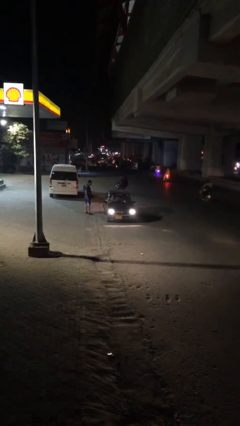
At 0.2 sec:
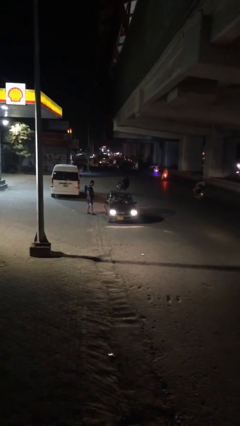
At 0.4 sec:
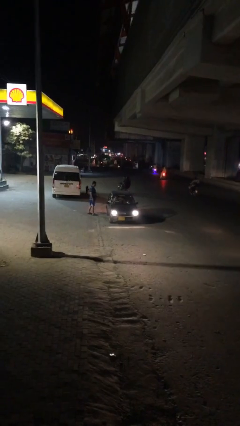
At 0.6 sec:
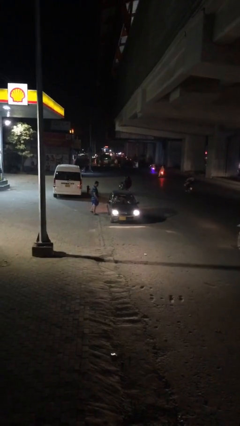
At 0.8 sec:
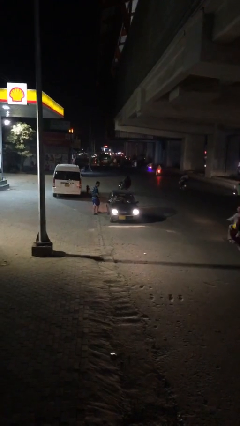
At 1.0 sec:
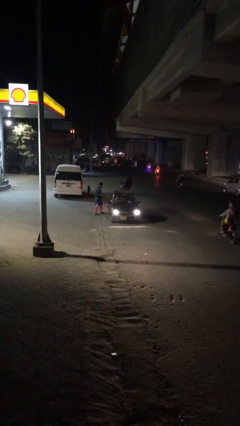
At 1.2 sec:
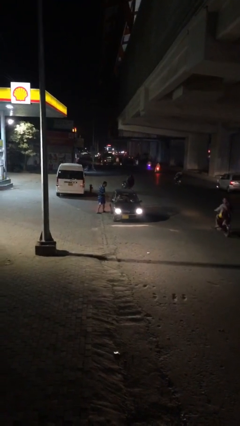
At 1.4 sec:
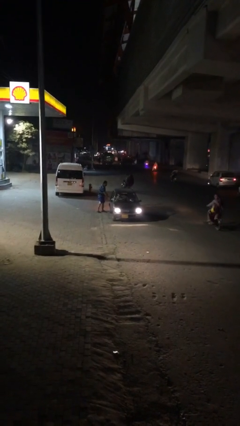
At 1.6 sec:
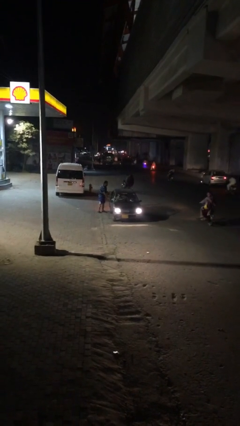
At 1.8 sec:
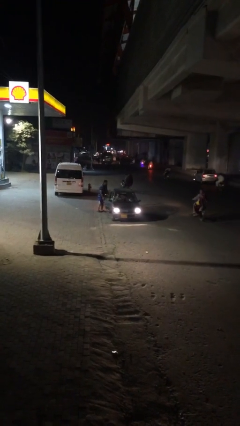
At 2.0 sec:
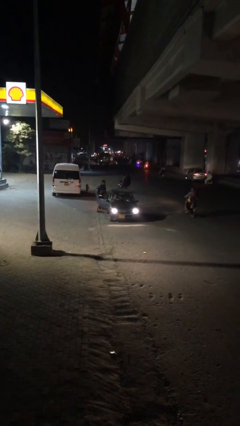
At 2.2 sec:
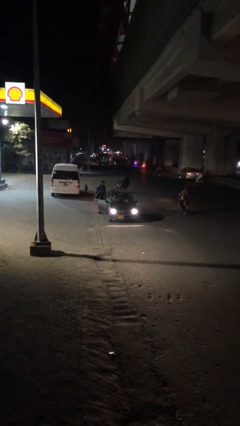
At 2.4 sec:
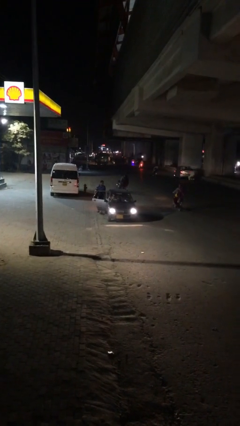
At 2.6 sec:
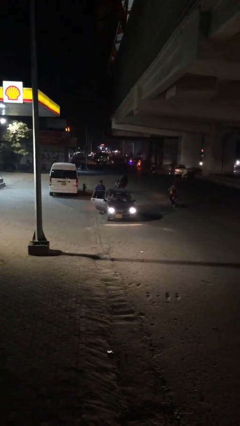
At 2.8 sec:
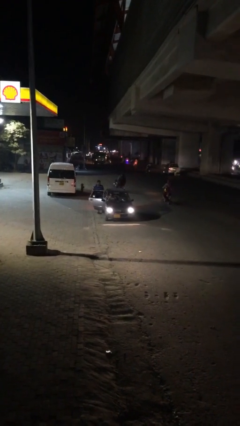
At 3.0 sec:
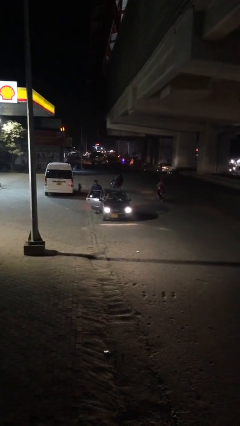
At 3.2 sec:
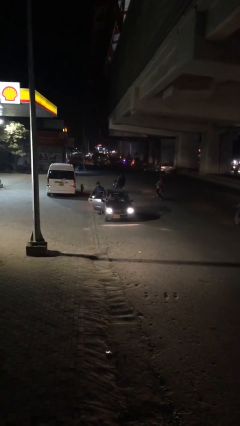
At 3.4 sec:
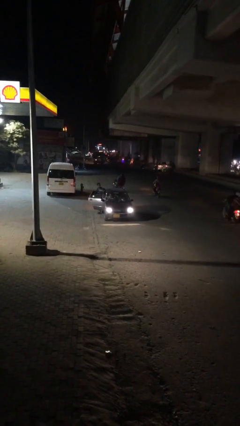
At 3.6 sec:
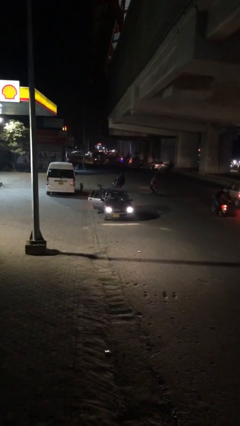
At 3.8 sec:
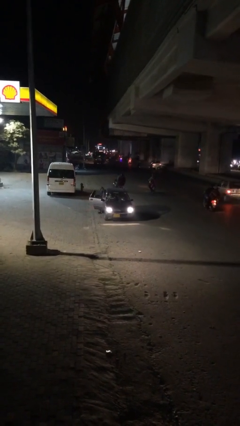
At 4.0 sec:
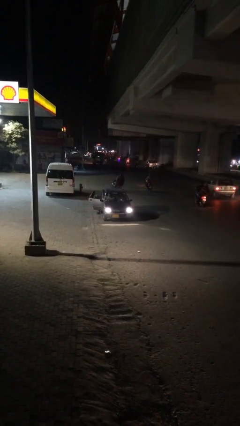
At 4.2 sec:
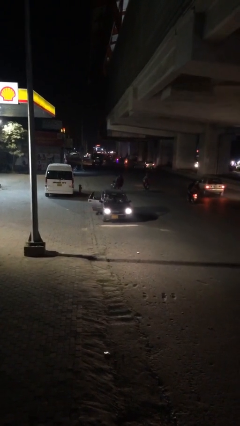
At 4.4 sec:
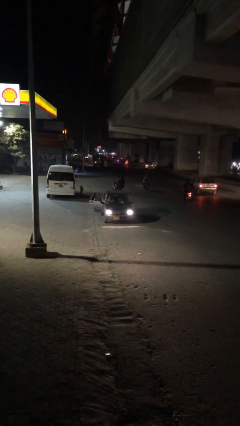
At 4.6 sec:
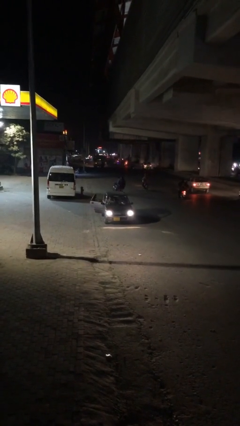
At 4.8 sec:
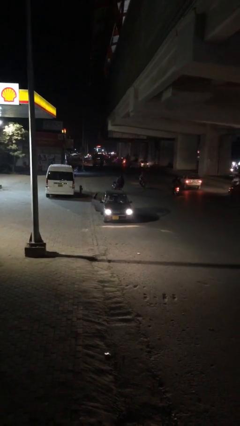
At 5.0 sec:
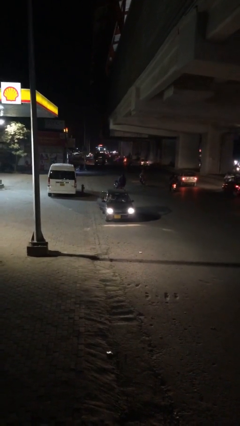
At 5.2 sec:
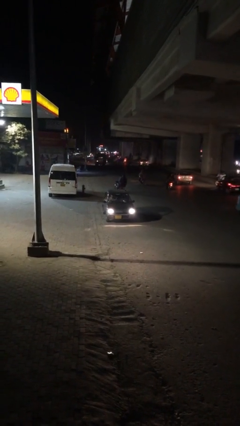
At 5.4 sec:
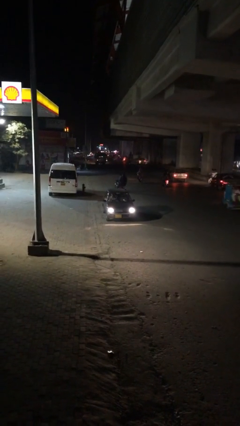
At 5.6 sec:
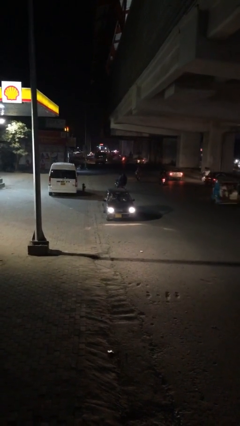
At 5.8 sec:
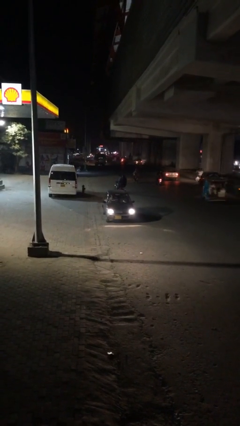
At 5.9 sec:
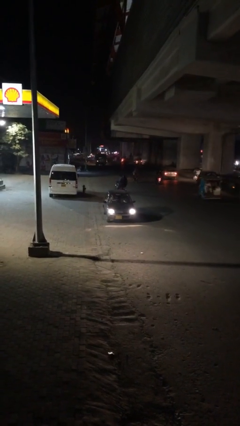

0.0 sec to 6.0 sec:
car picks up person

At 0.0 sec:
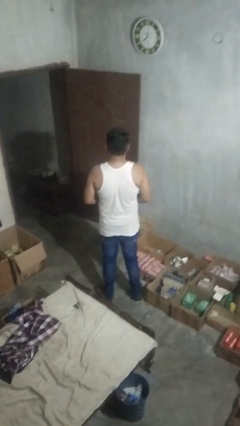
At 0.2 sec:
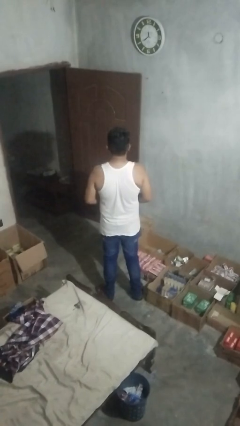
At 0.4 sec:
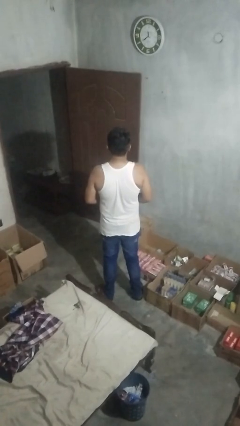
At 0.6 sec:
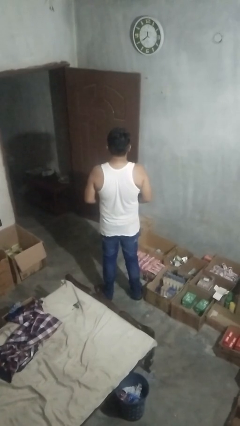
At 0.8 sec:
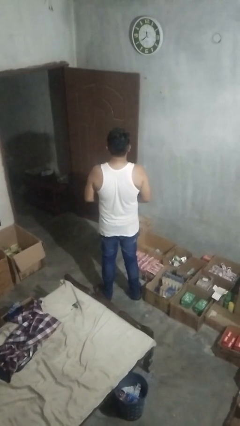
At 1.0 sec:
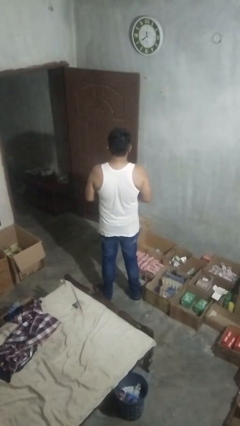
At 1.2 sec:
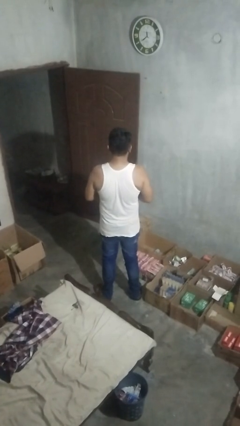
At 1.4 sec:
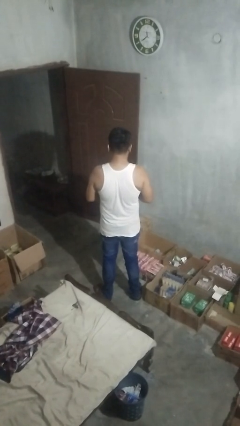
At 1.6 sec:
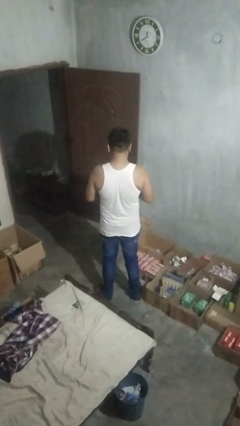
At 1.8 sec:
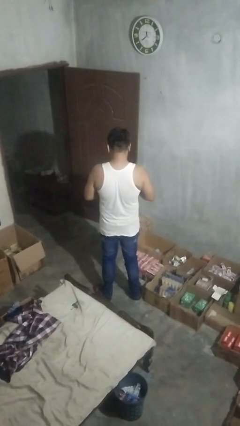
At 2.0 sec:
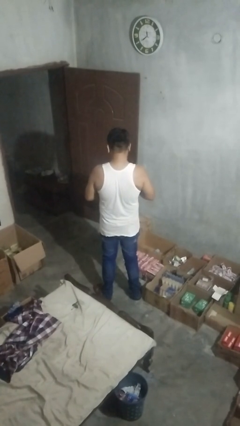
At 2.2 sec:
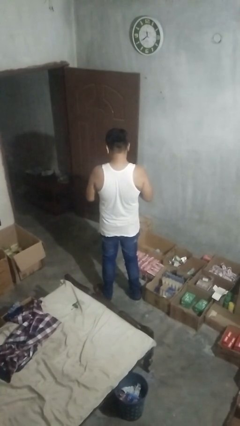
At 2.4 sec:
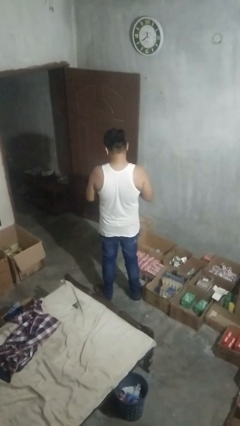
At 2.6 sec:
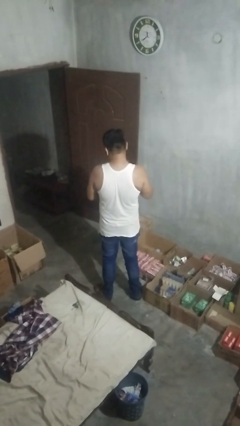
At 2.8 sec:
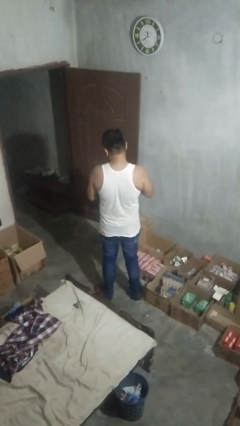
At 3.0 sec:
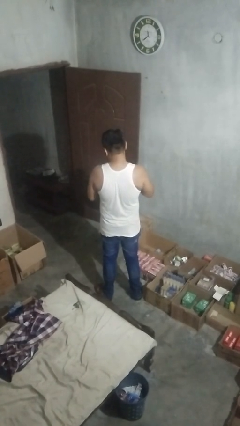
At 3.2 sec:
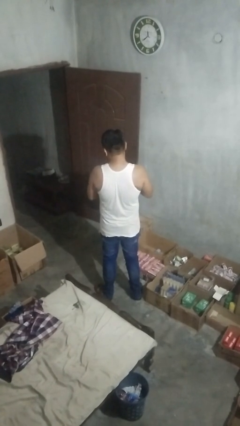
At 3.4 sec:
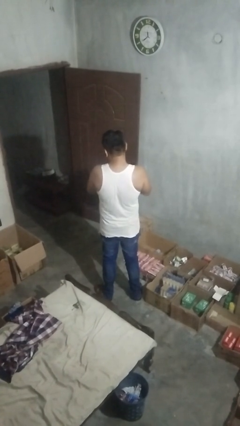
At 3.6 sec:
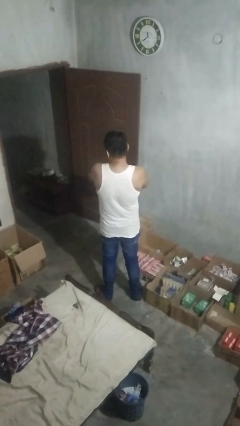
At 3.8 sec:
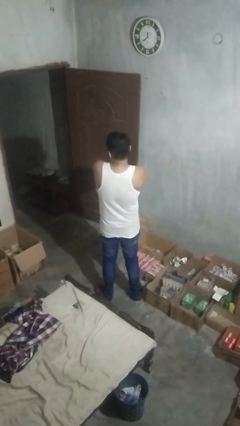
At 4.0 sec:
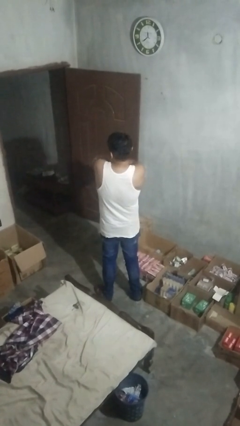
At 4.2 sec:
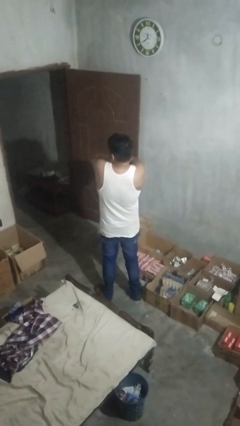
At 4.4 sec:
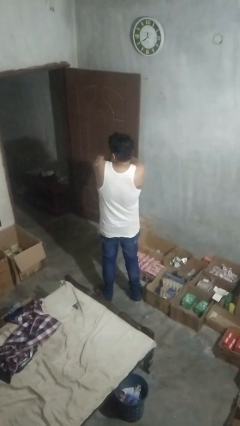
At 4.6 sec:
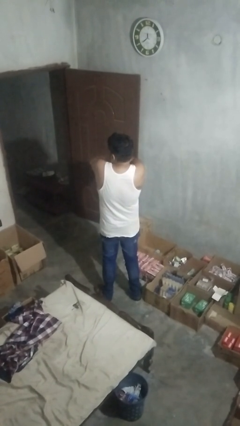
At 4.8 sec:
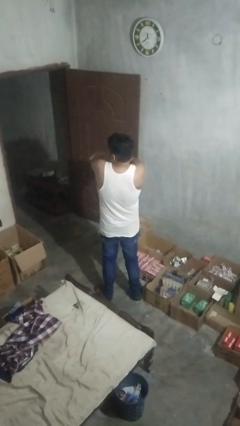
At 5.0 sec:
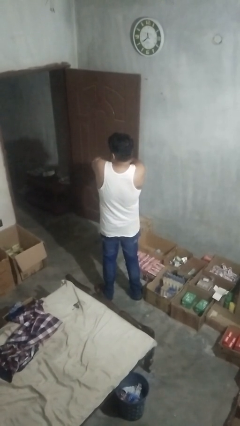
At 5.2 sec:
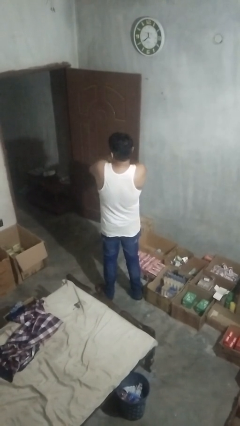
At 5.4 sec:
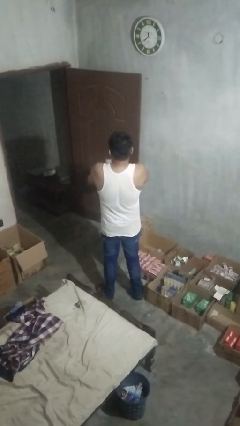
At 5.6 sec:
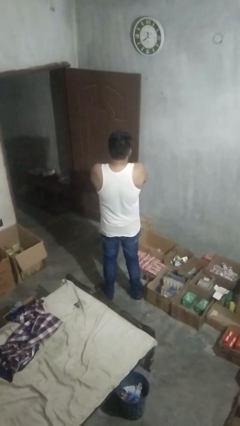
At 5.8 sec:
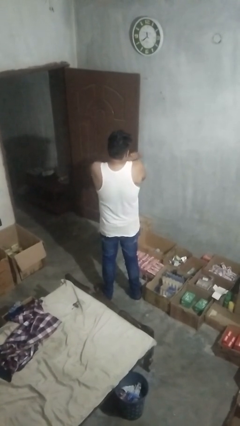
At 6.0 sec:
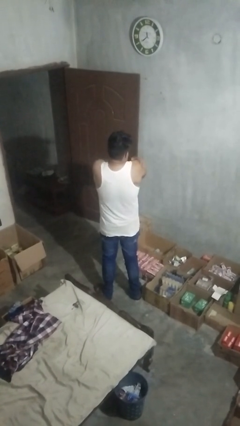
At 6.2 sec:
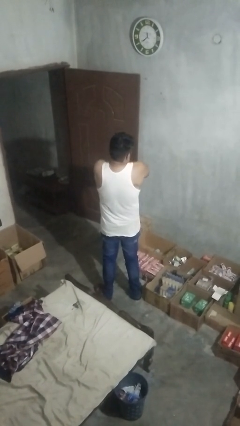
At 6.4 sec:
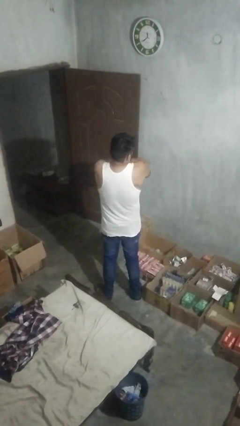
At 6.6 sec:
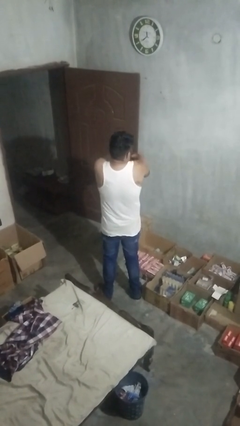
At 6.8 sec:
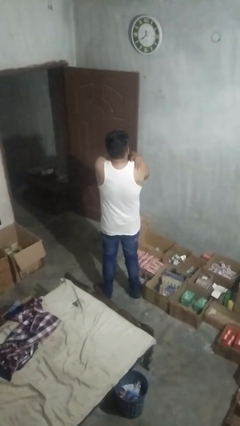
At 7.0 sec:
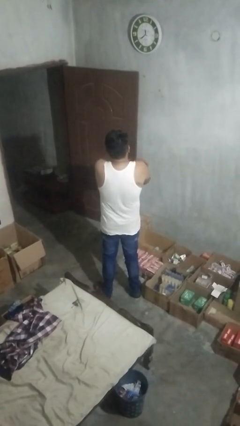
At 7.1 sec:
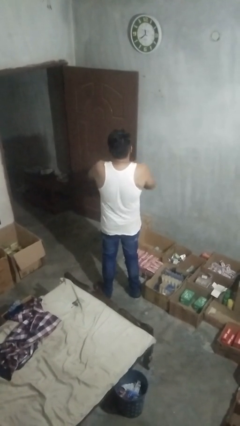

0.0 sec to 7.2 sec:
person applies sunscreen

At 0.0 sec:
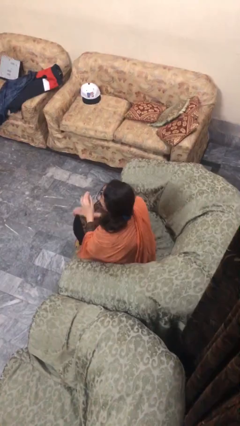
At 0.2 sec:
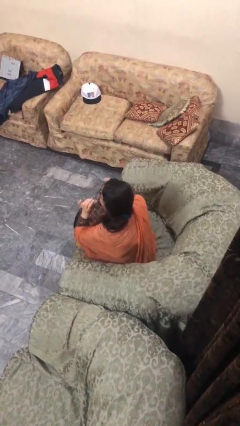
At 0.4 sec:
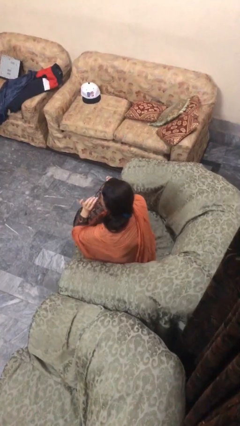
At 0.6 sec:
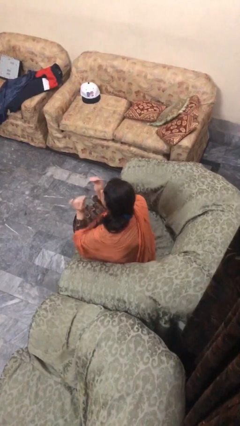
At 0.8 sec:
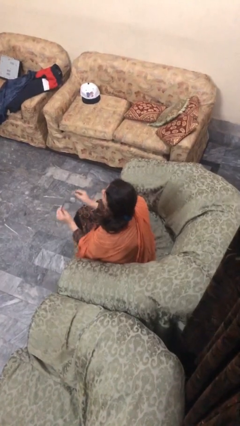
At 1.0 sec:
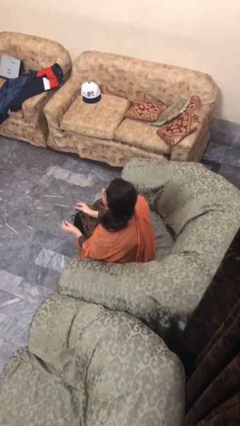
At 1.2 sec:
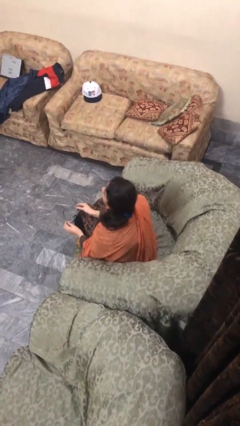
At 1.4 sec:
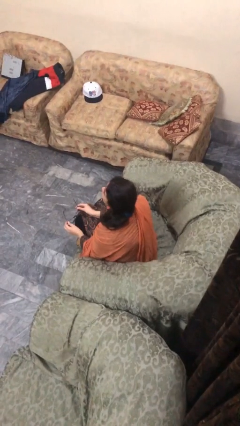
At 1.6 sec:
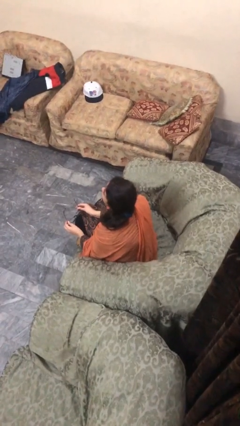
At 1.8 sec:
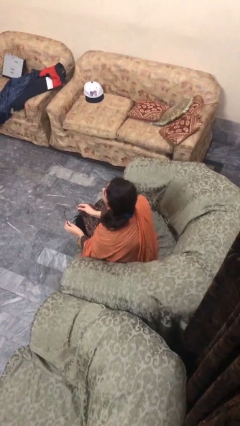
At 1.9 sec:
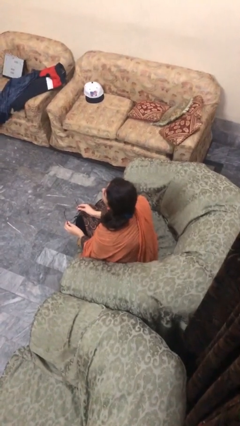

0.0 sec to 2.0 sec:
person takes off glasses

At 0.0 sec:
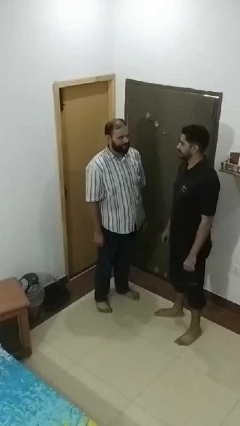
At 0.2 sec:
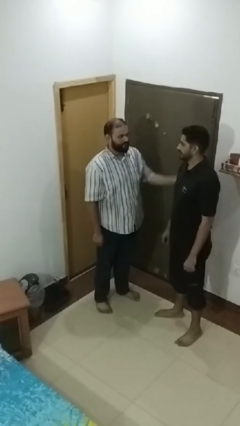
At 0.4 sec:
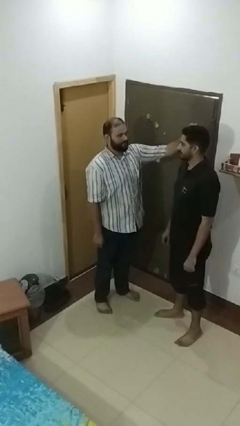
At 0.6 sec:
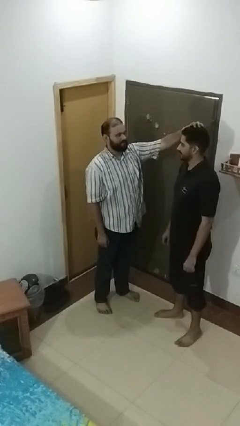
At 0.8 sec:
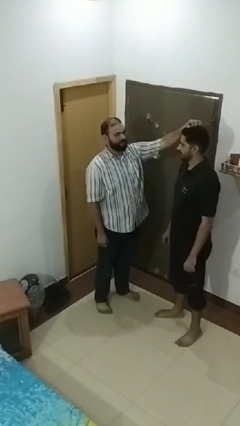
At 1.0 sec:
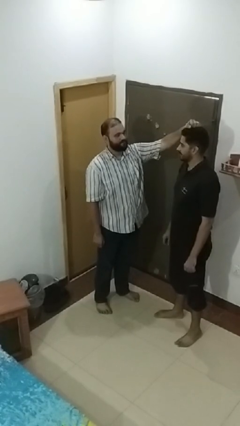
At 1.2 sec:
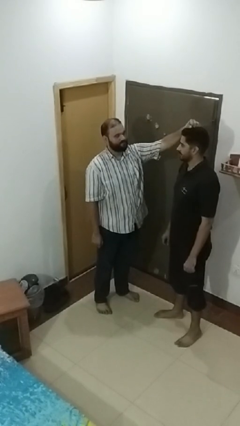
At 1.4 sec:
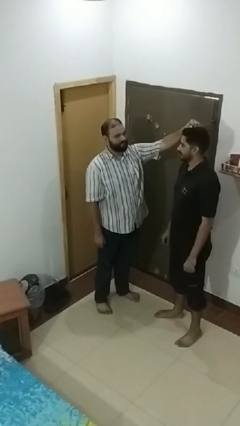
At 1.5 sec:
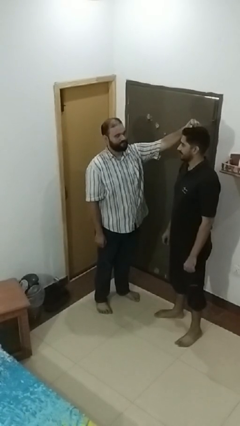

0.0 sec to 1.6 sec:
person grabs person by hair

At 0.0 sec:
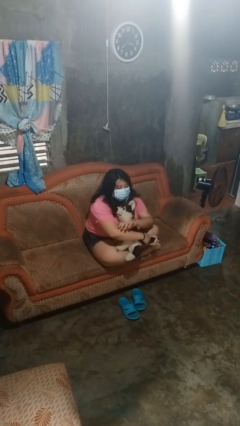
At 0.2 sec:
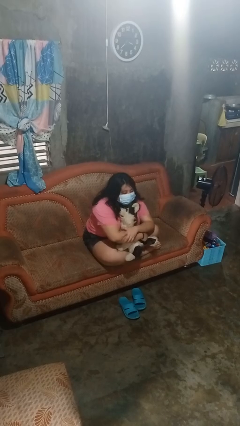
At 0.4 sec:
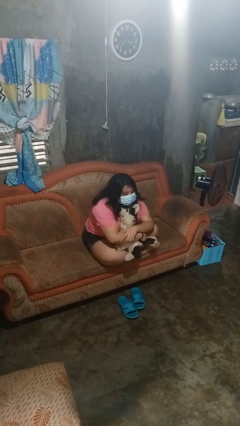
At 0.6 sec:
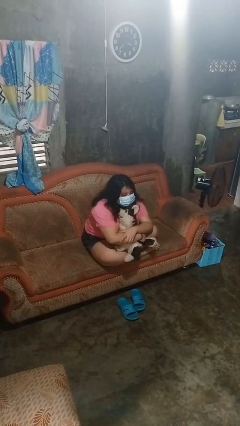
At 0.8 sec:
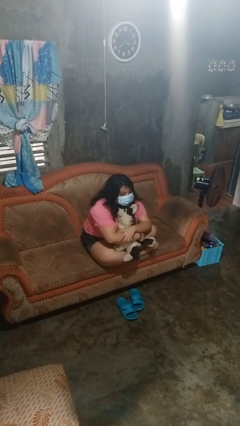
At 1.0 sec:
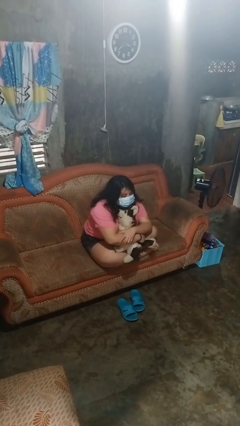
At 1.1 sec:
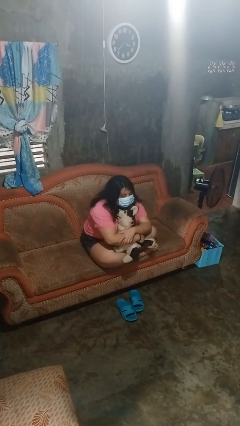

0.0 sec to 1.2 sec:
person hugs stuffed animal
